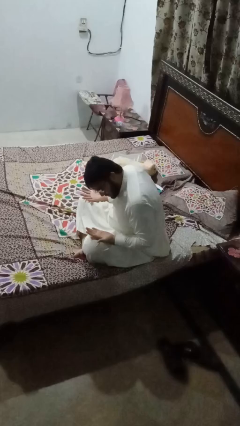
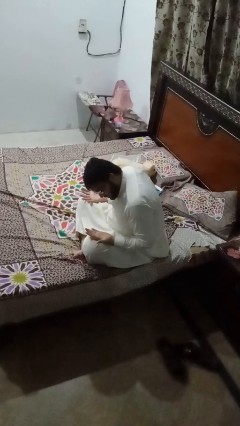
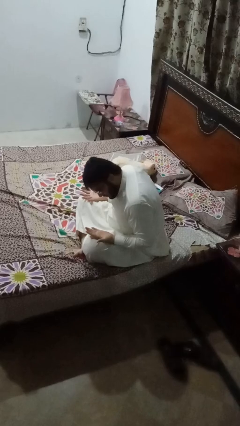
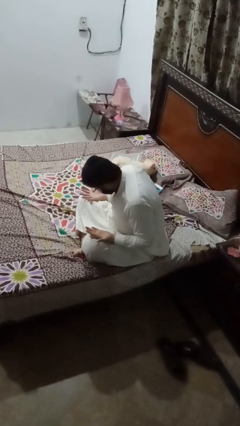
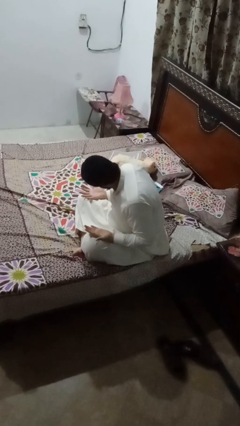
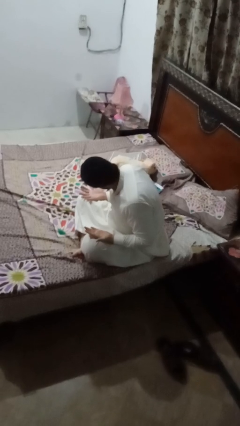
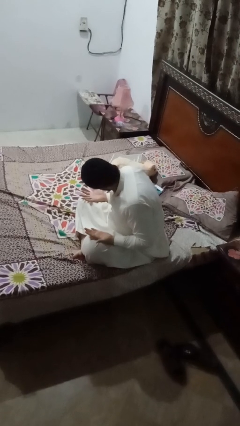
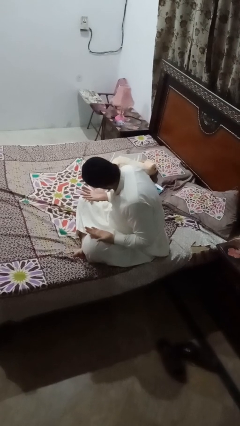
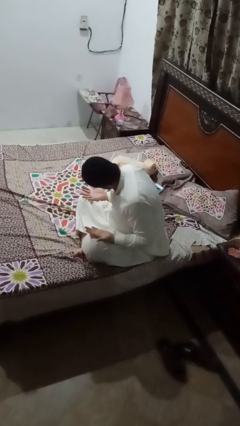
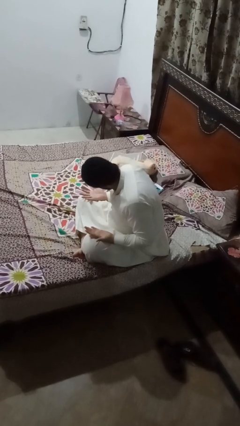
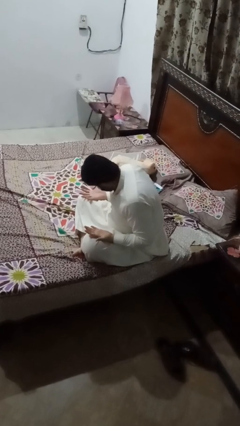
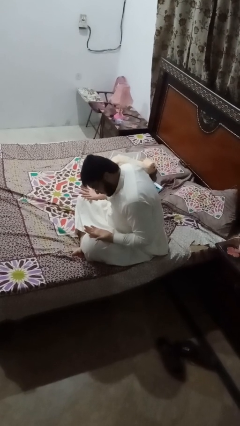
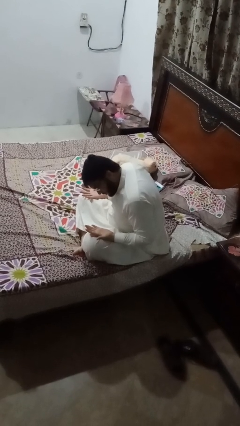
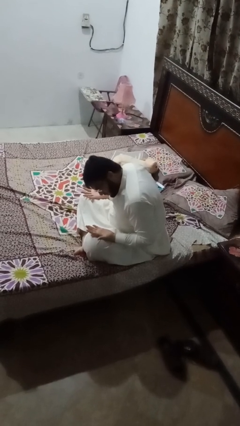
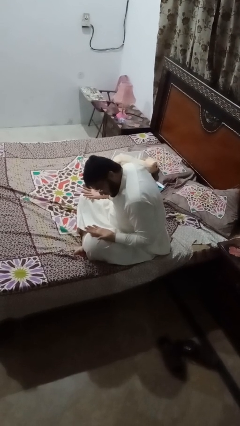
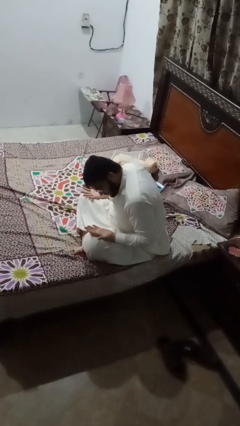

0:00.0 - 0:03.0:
person looks at hands in lap

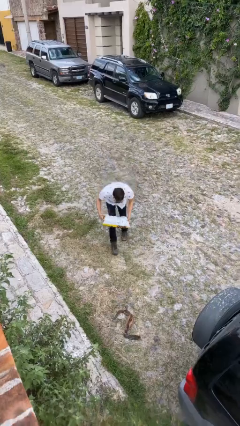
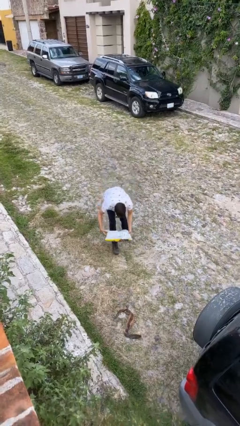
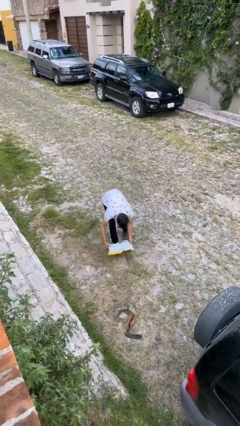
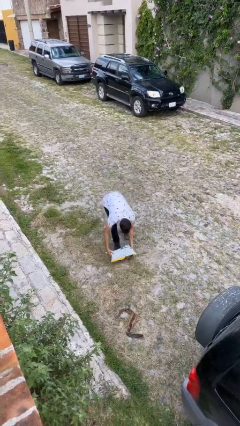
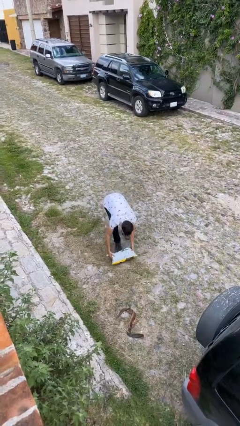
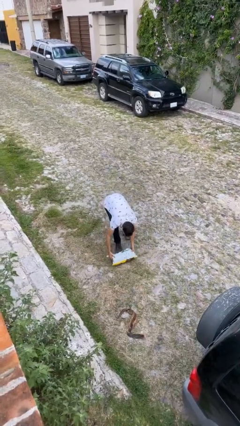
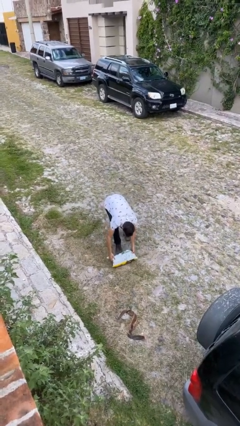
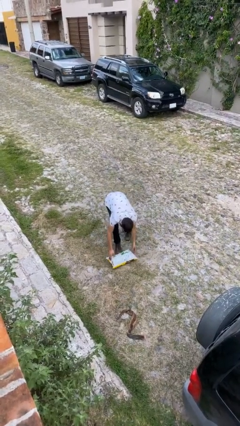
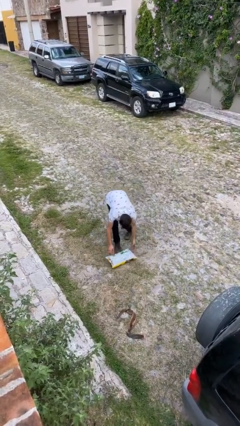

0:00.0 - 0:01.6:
person puts down object on floor

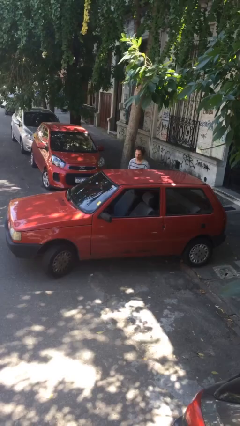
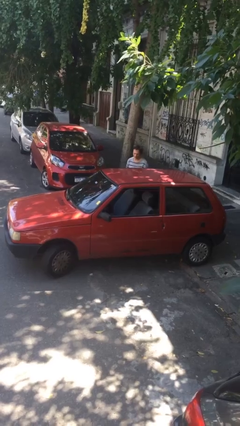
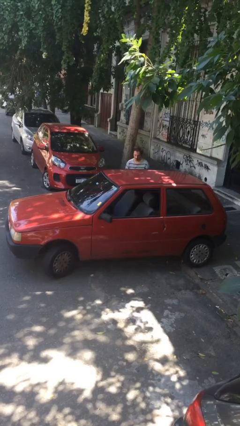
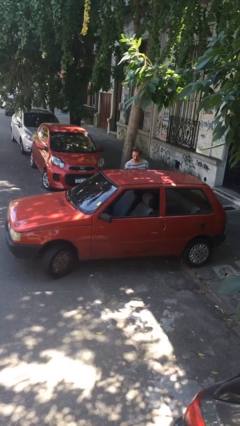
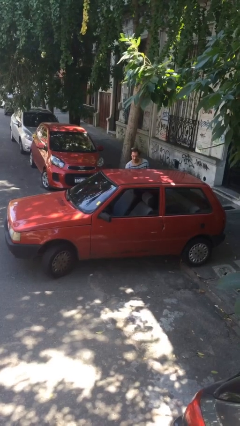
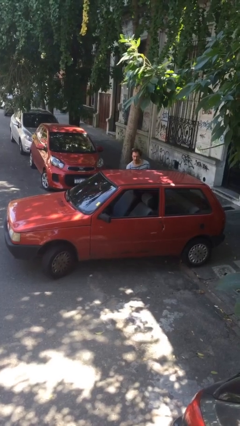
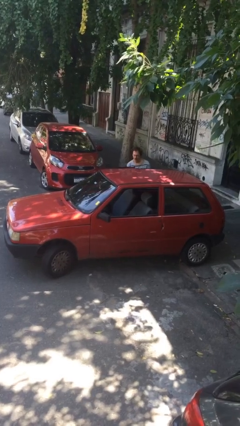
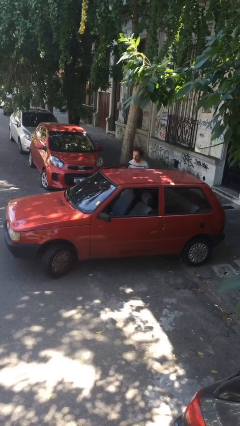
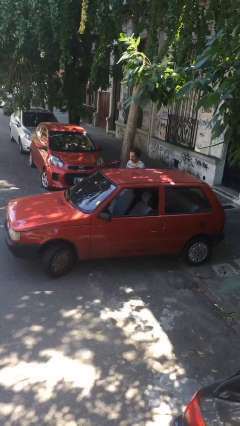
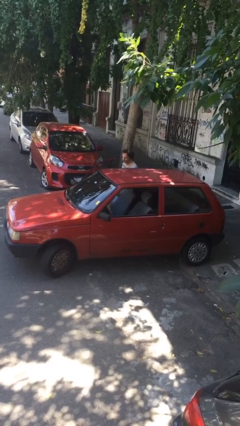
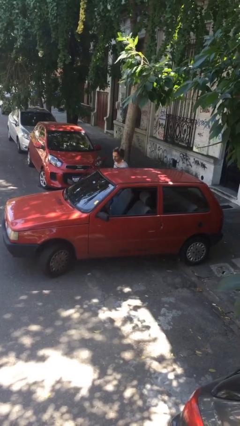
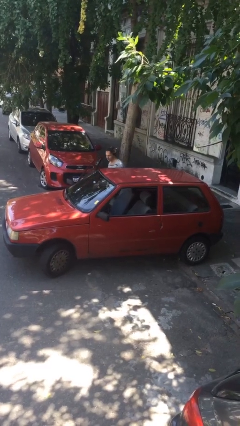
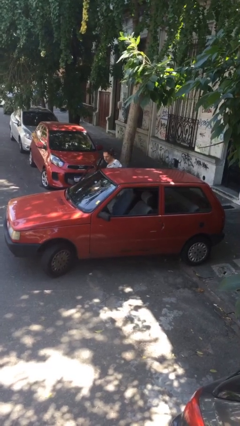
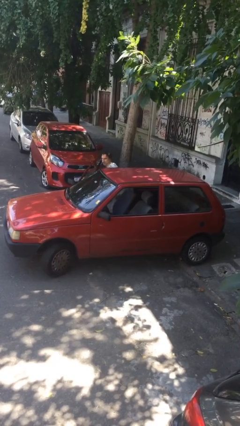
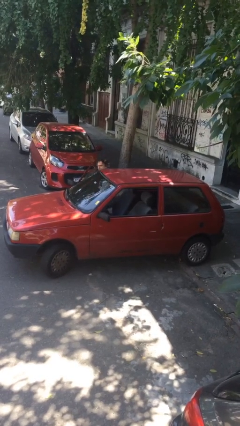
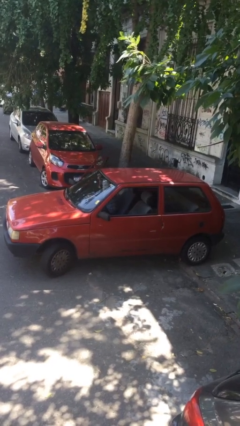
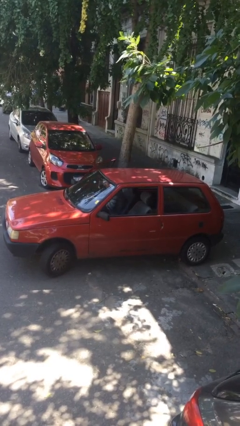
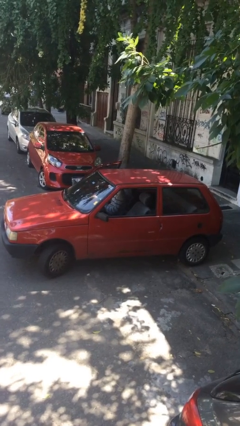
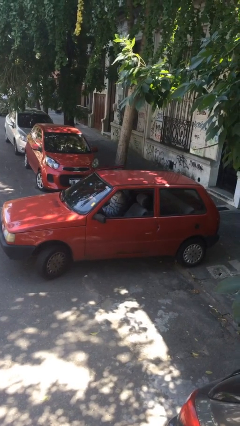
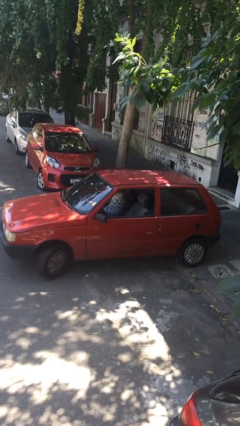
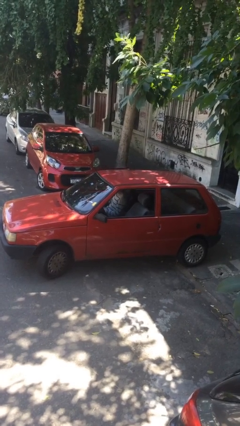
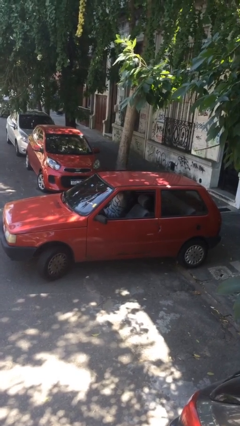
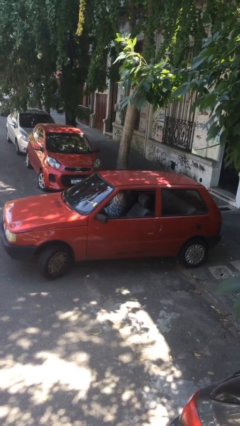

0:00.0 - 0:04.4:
car picks up person

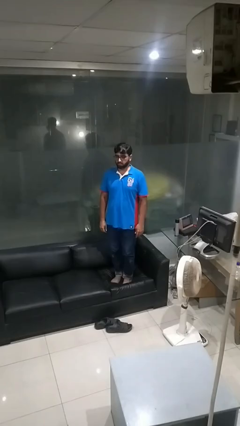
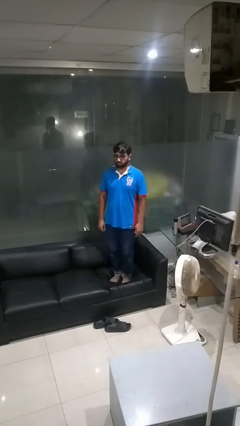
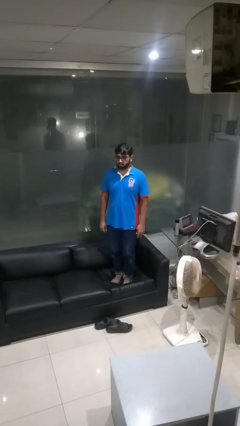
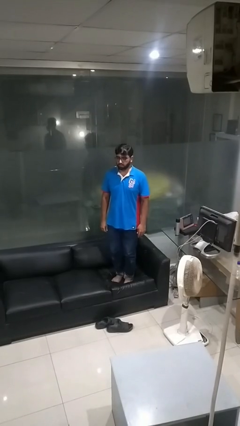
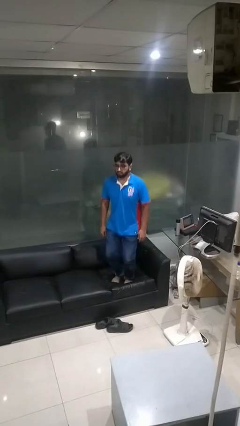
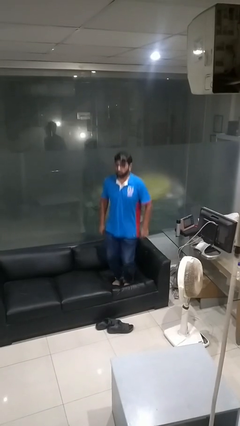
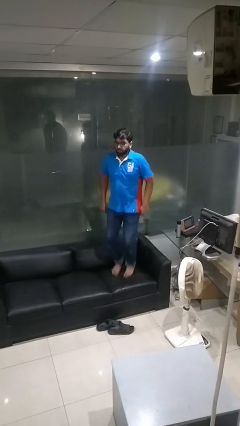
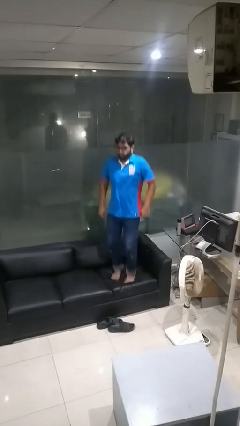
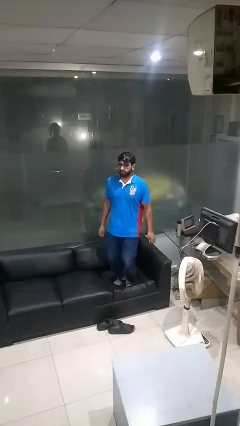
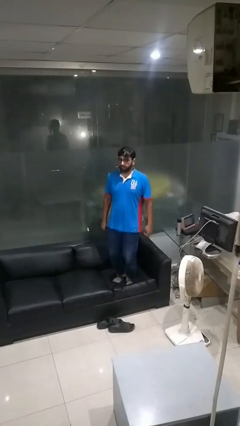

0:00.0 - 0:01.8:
person jumps on couch

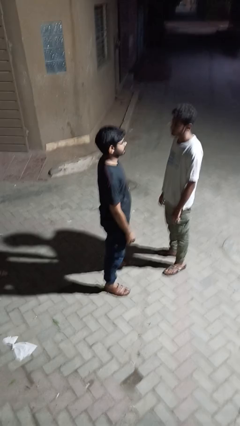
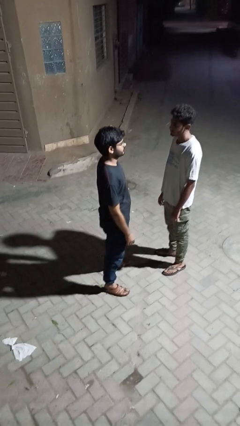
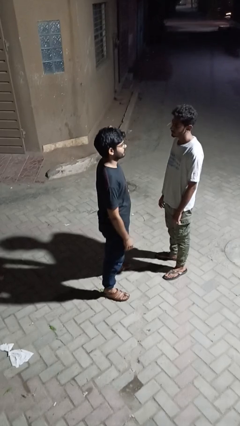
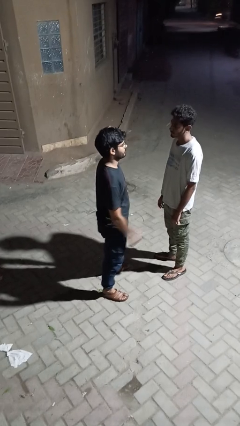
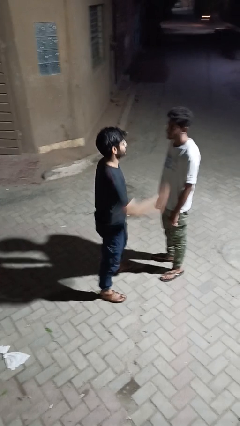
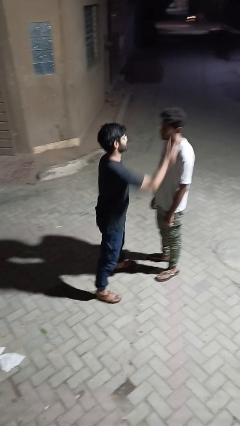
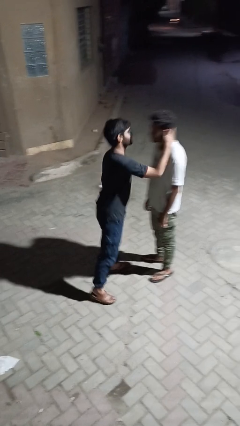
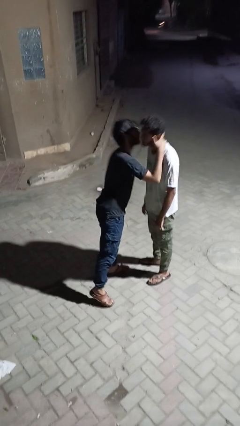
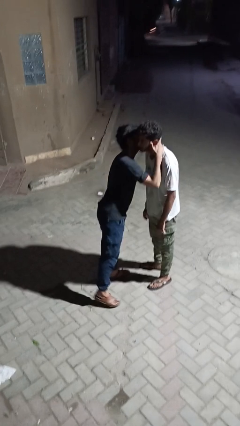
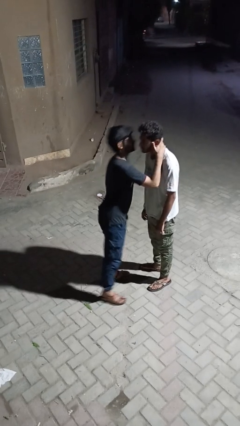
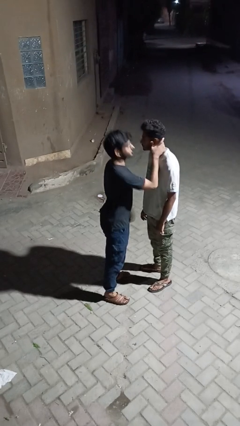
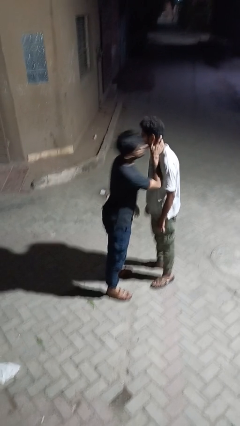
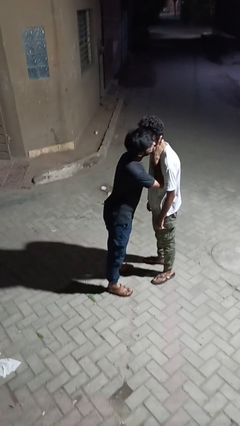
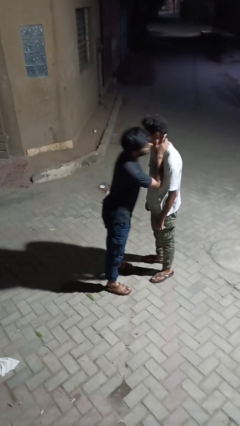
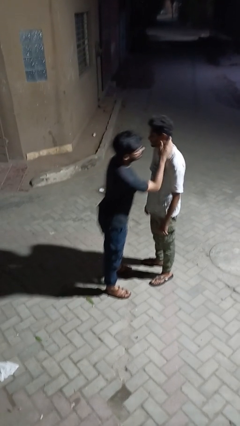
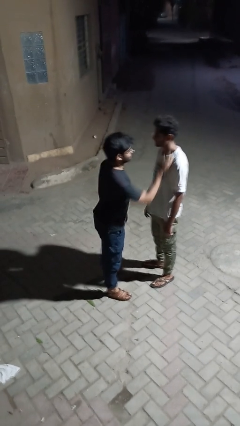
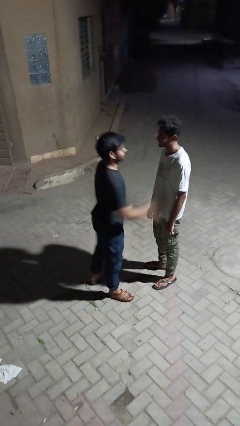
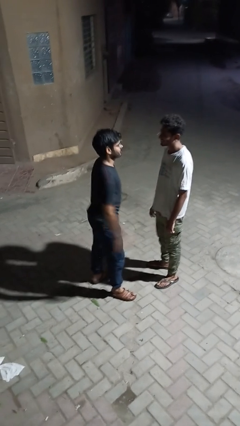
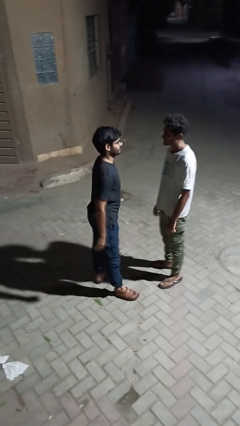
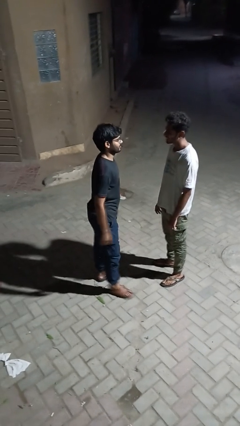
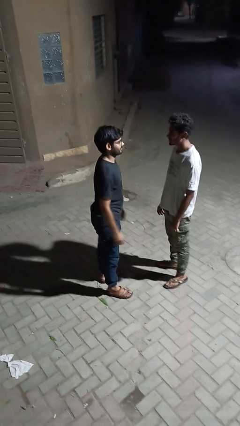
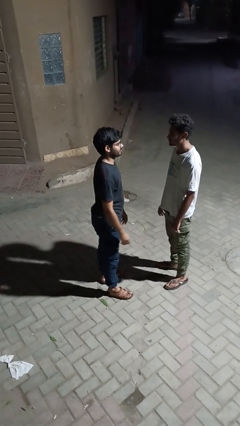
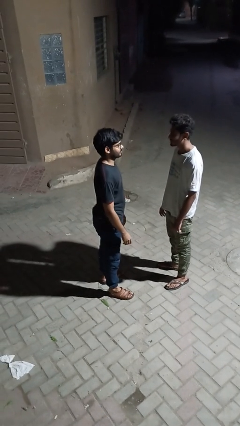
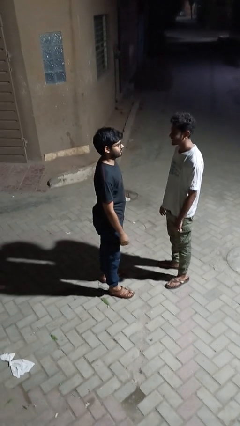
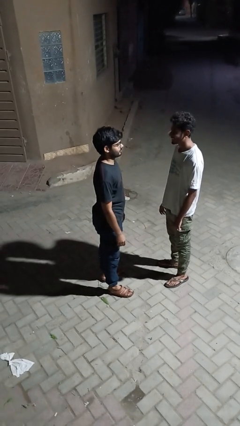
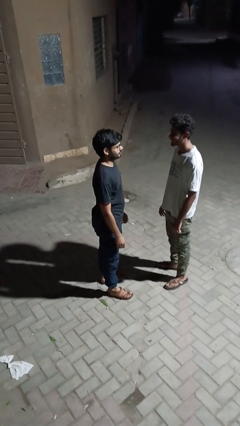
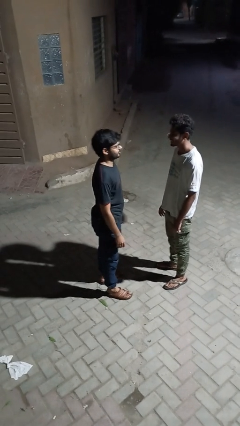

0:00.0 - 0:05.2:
person polishes car with rag

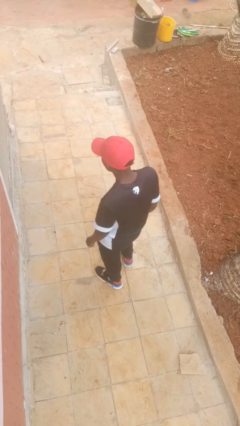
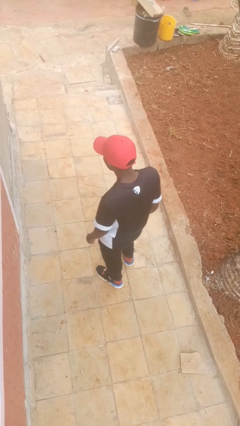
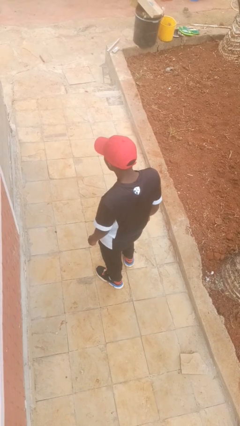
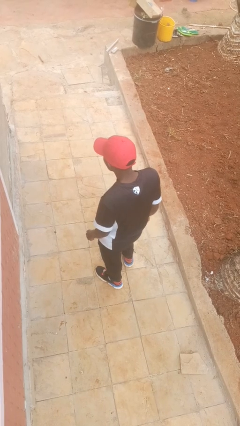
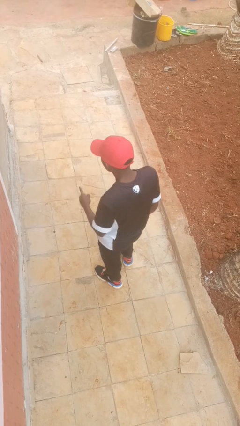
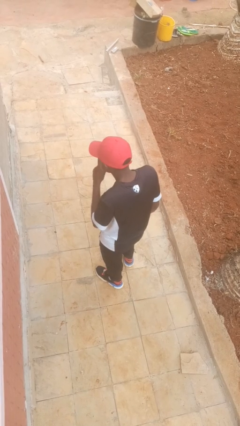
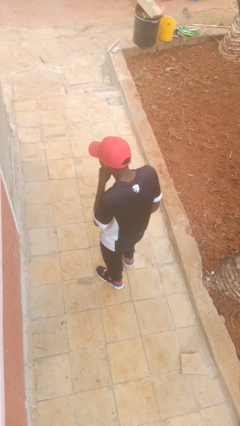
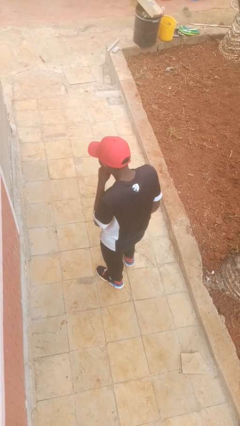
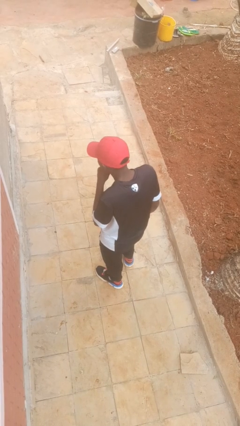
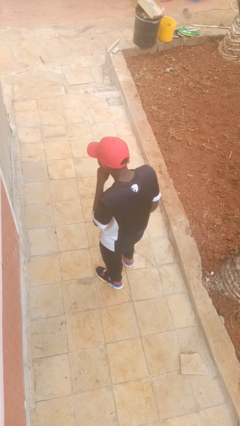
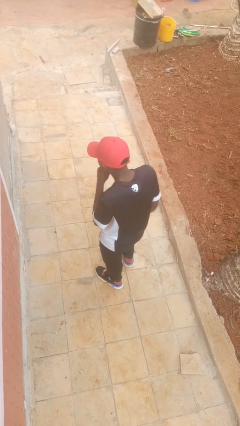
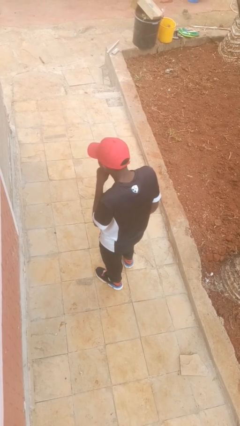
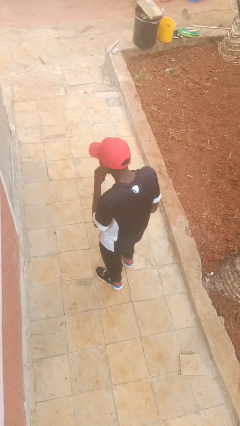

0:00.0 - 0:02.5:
person gestures be quiet
